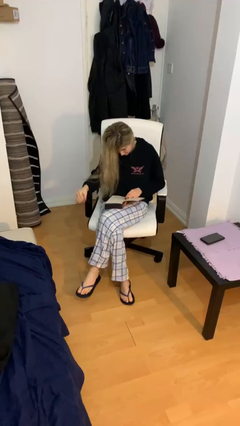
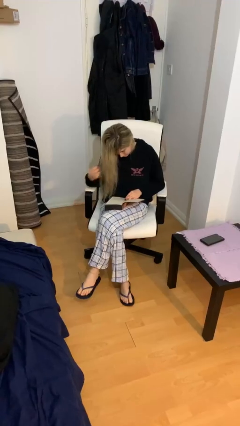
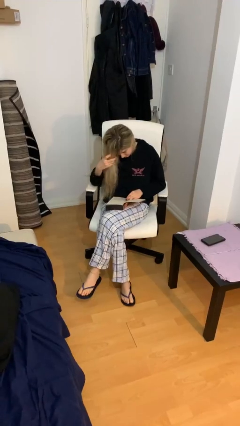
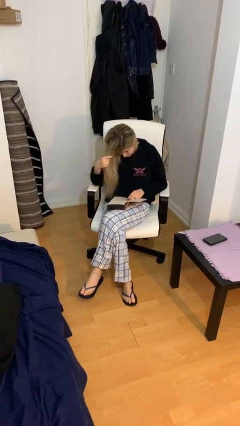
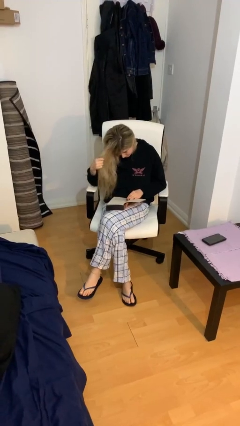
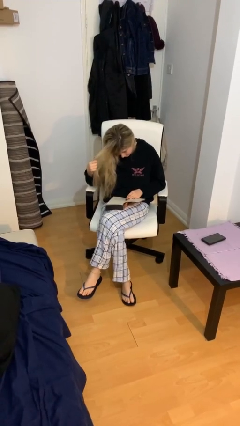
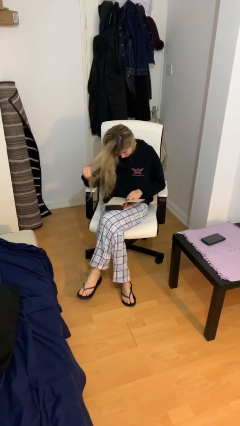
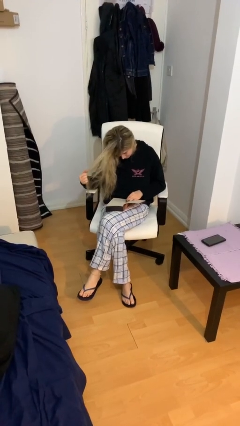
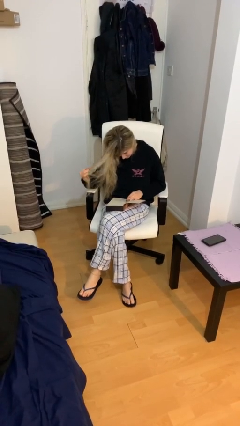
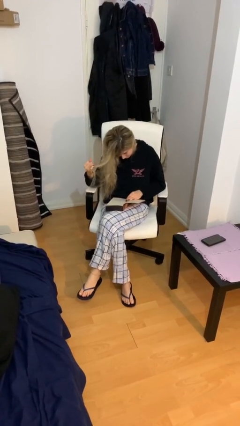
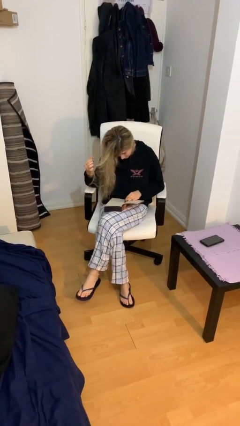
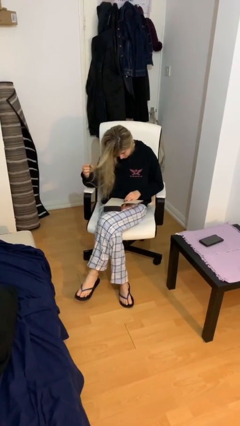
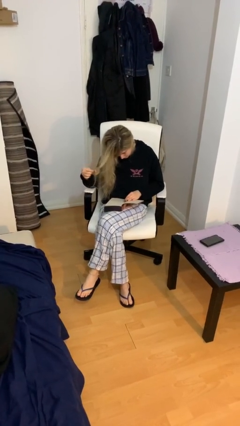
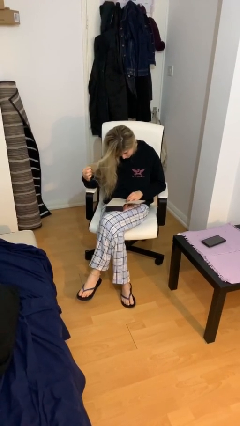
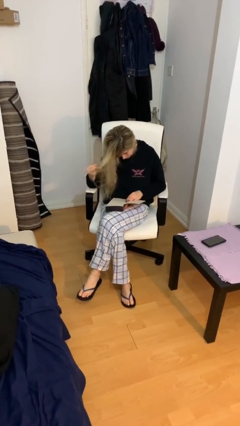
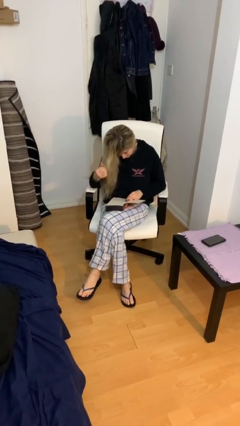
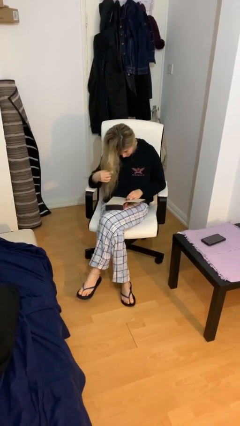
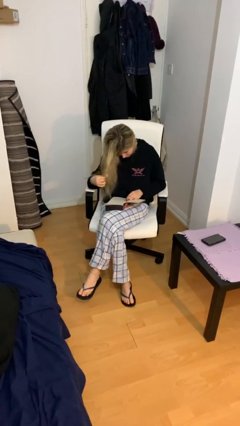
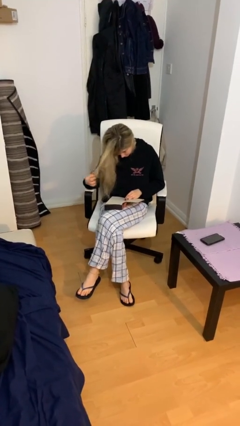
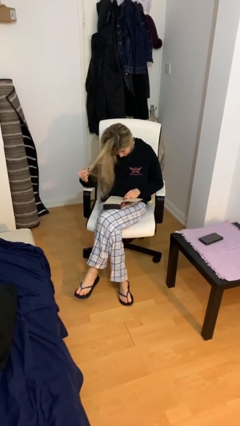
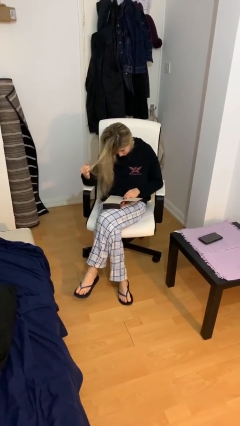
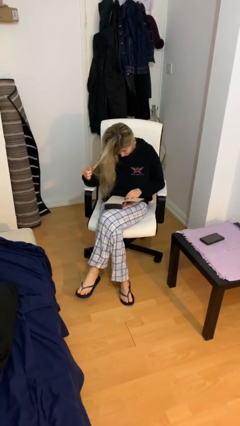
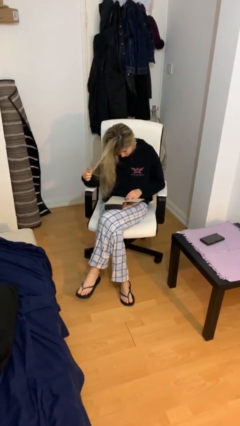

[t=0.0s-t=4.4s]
person reads document

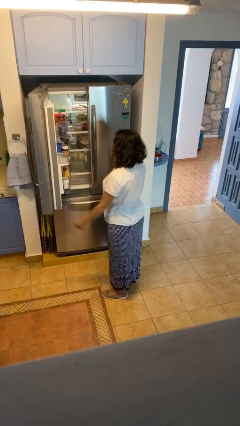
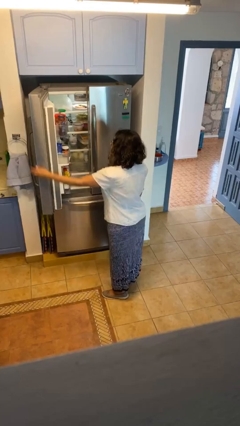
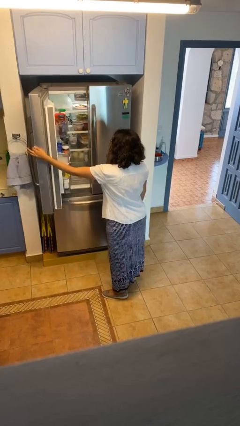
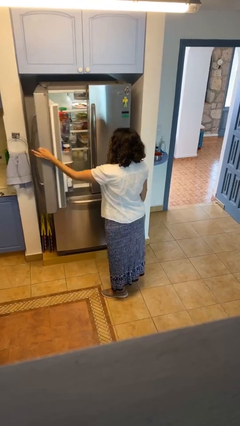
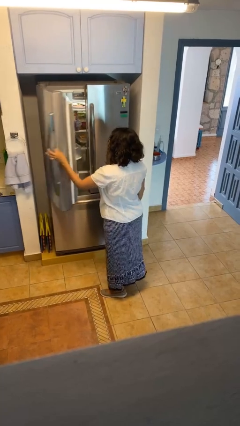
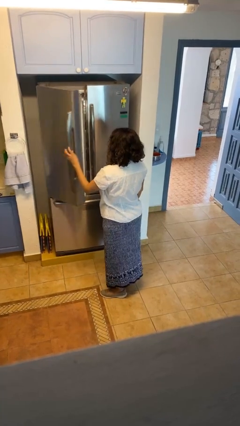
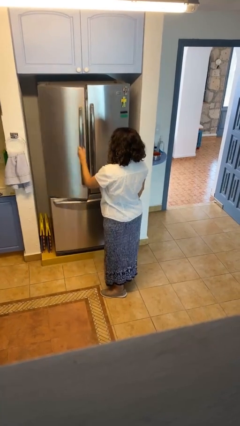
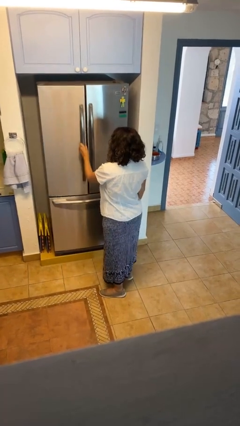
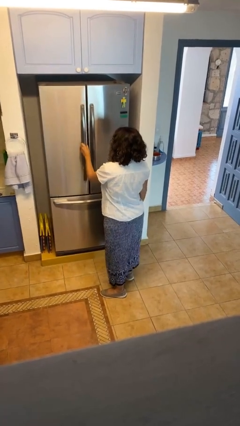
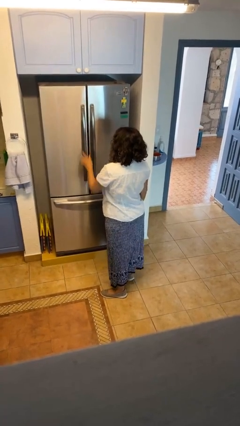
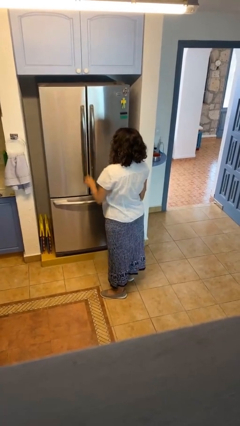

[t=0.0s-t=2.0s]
person closes refrigerator

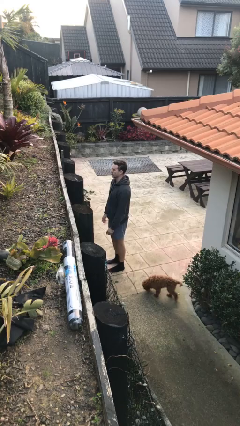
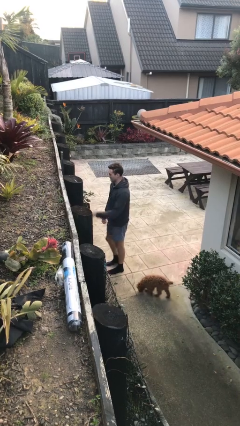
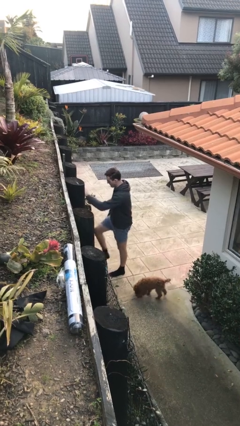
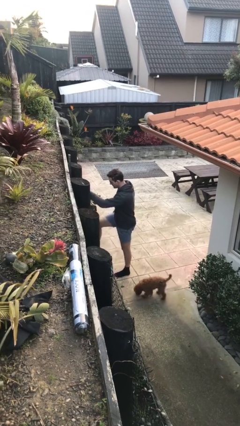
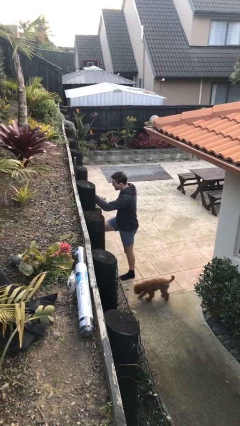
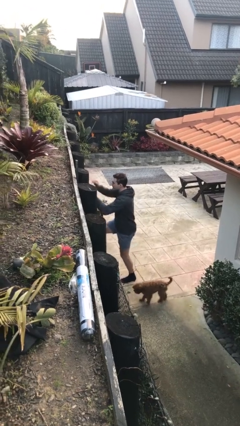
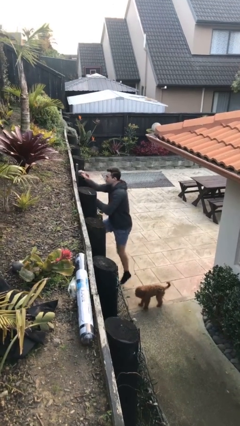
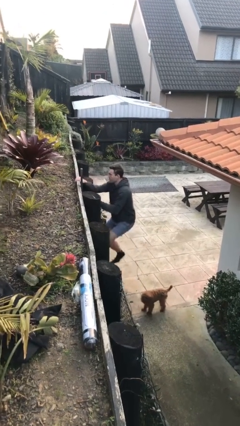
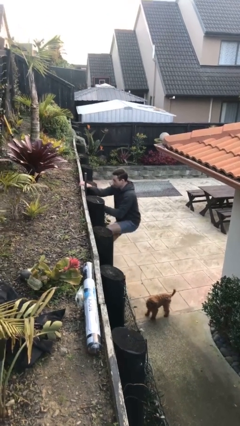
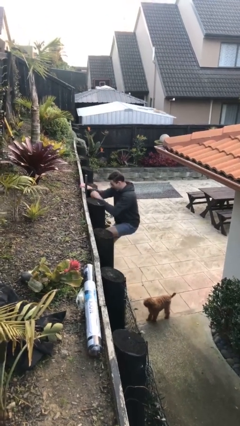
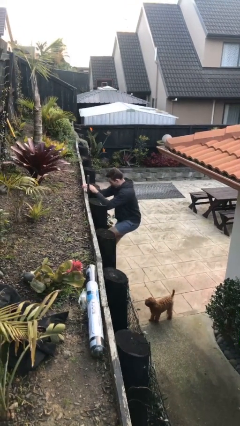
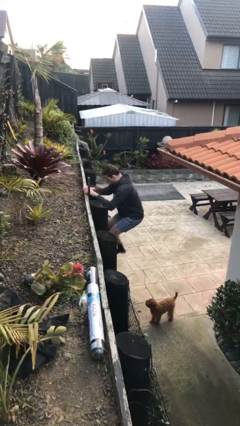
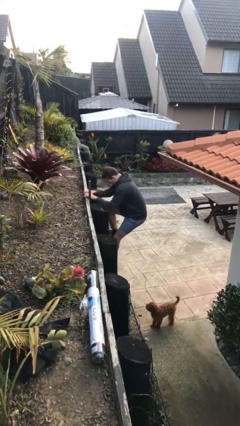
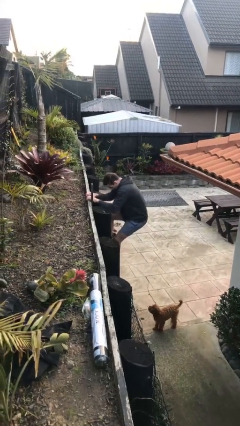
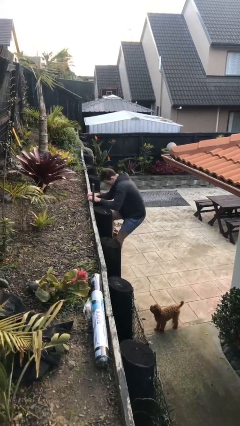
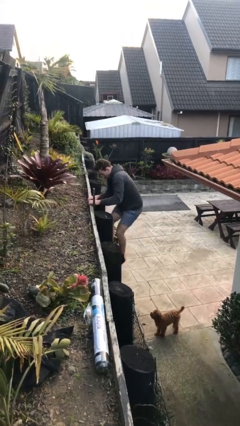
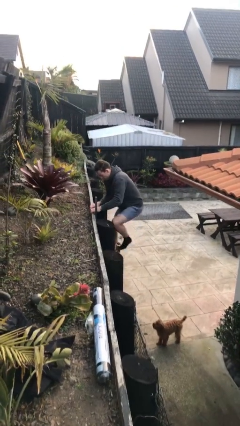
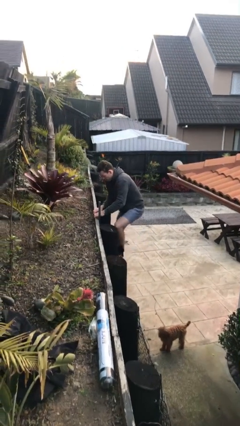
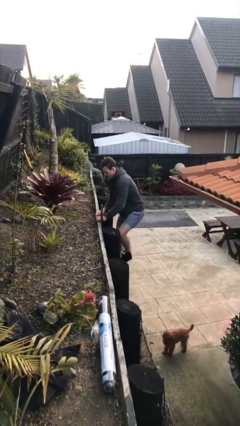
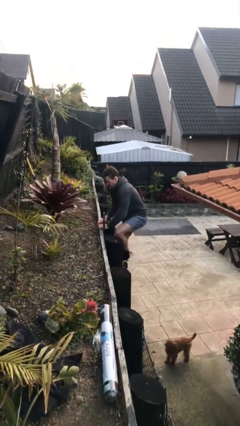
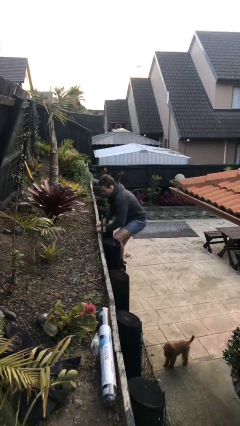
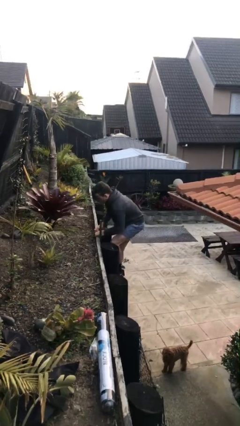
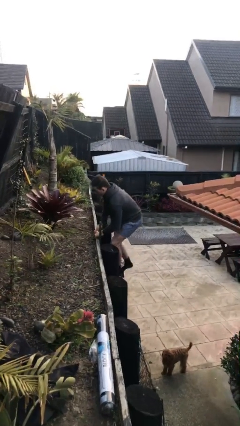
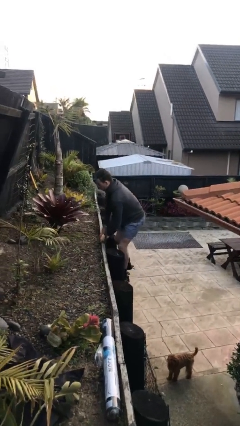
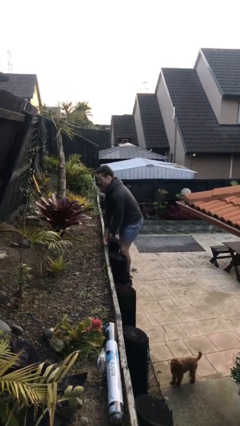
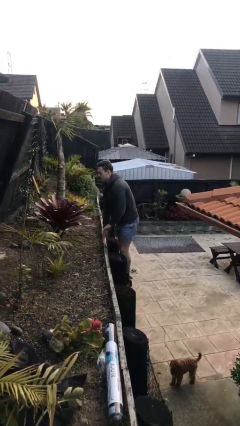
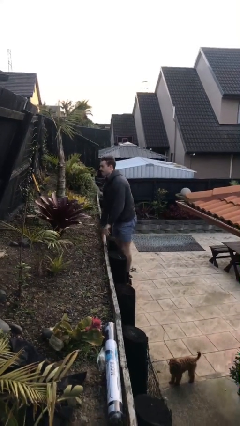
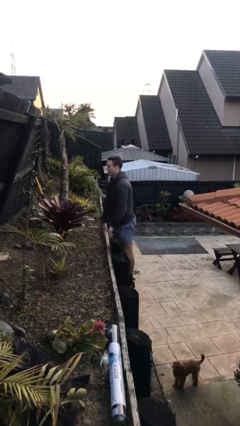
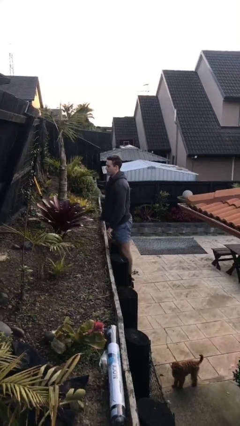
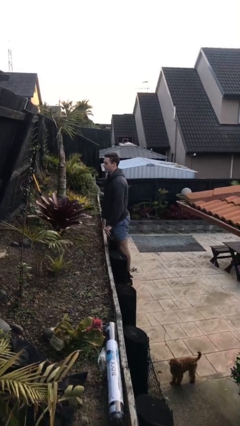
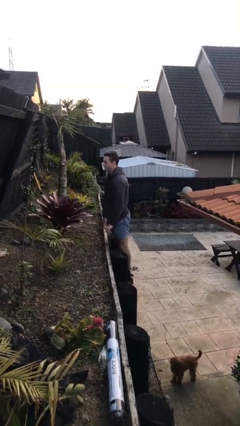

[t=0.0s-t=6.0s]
person climbs up ladder

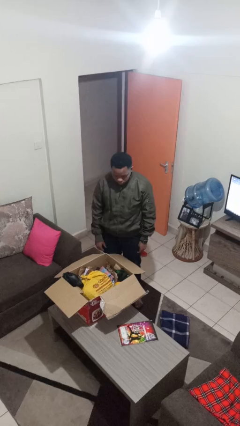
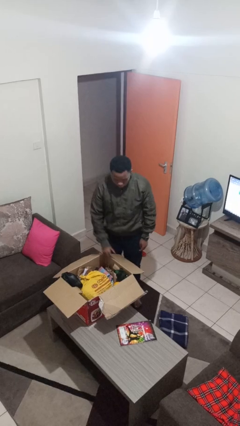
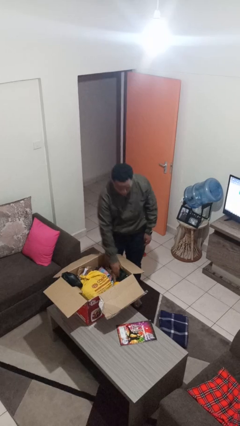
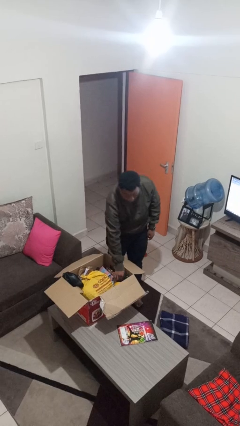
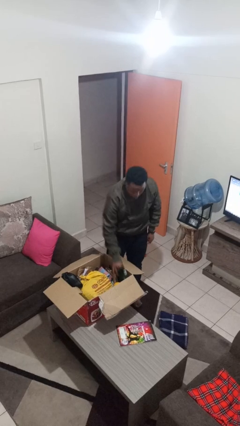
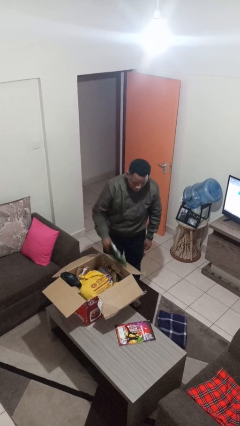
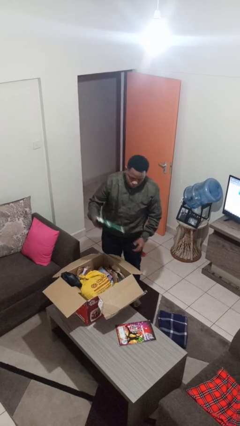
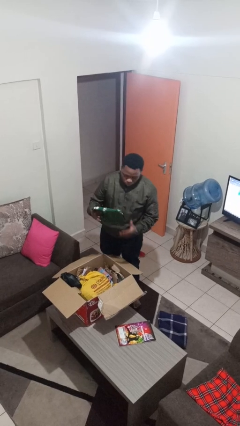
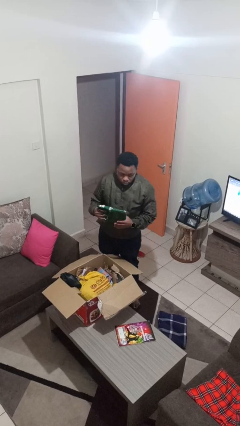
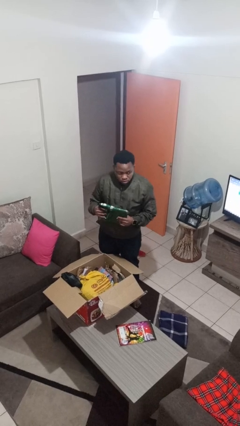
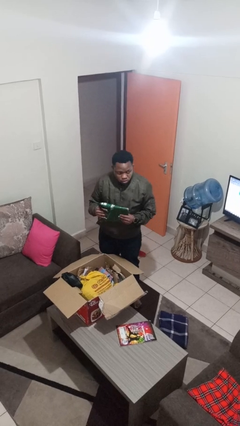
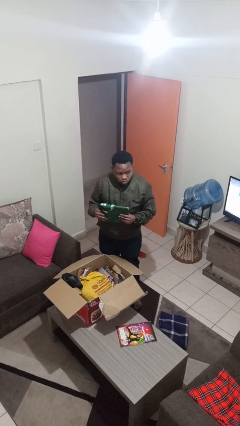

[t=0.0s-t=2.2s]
person takes object from box

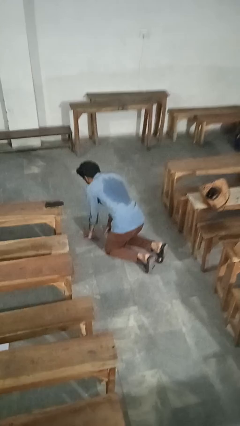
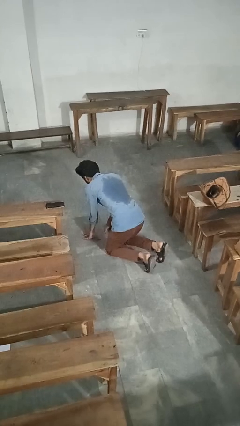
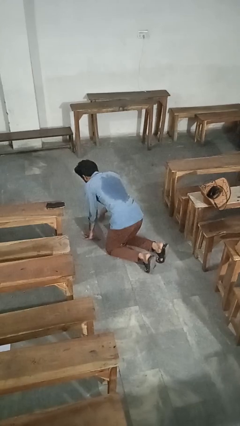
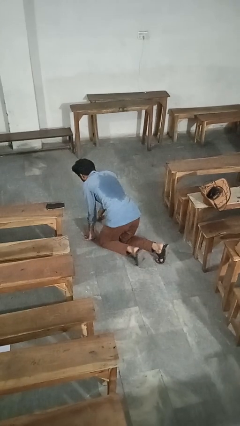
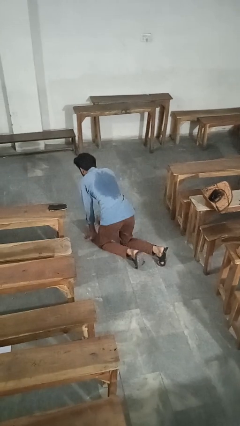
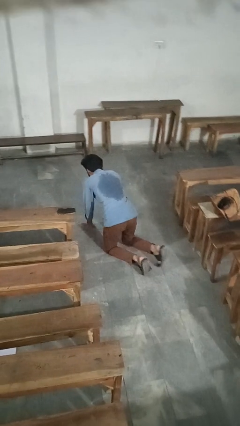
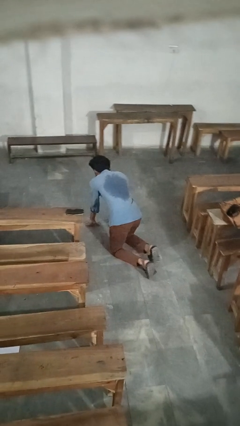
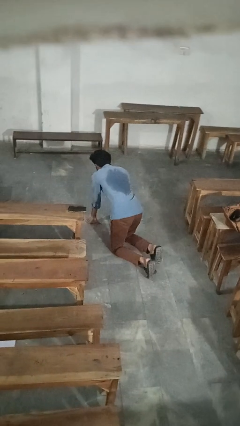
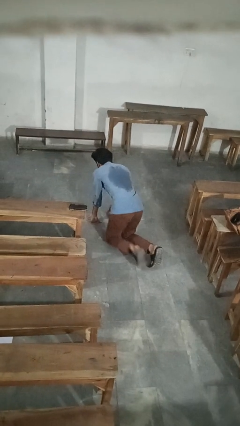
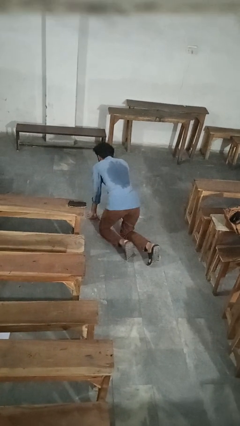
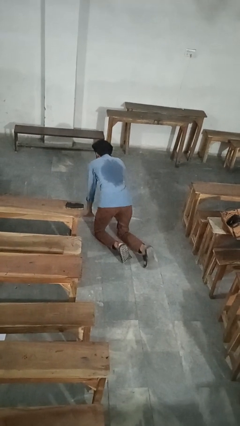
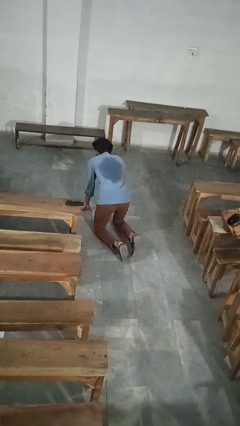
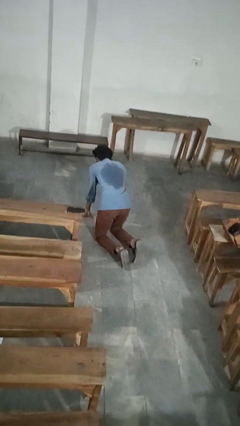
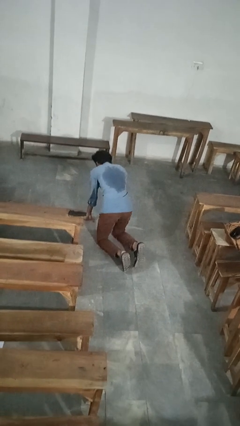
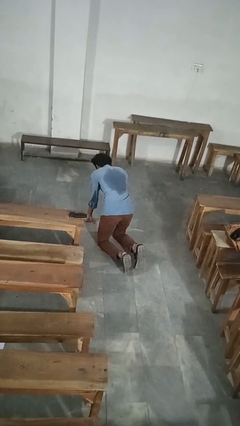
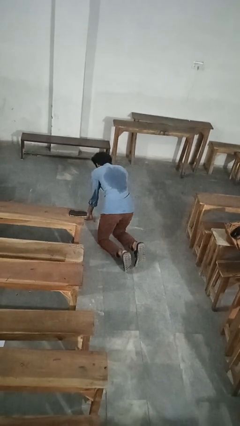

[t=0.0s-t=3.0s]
person crawls
